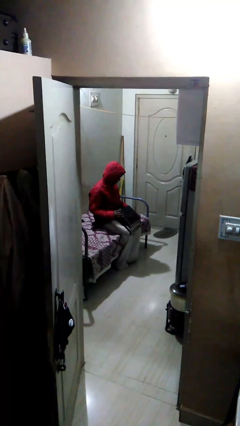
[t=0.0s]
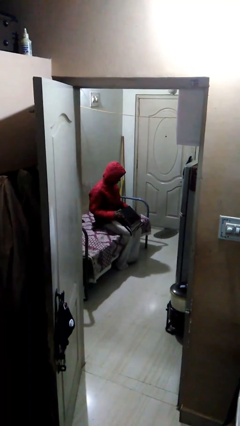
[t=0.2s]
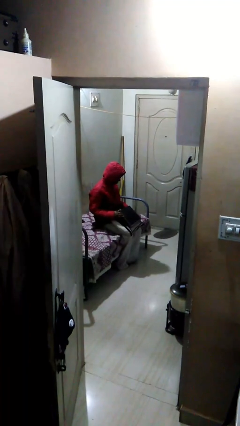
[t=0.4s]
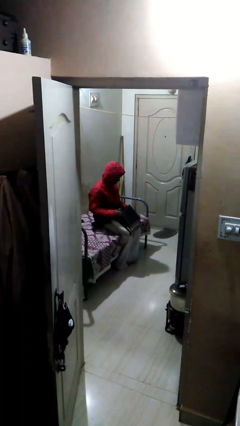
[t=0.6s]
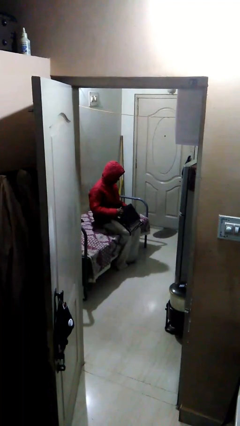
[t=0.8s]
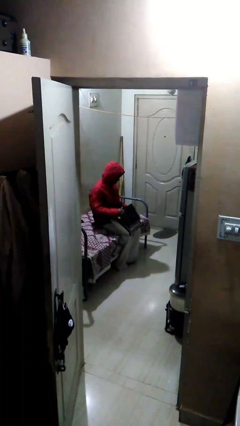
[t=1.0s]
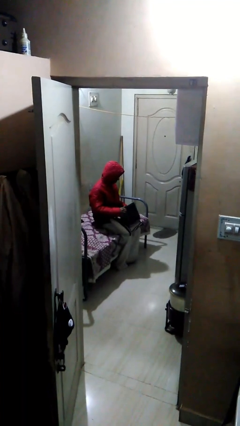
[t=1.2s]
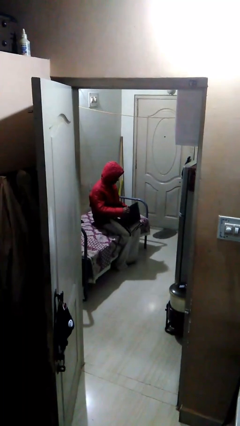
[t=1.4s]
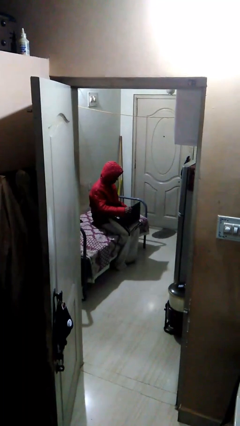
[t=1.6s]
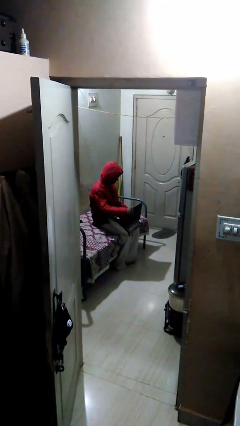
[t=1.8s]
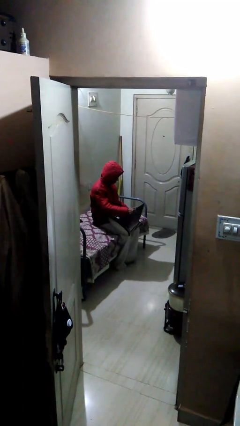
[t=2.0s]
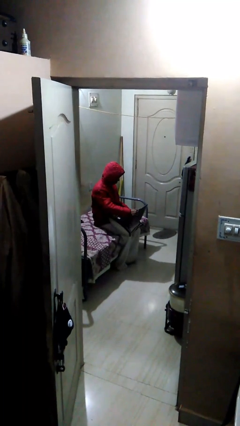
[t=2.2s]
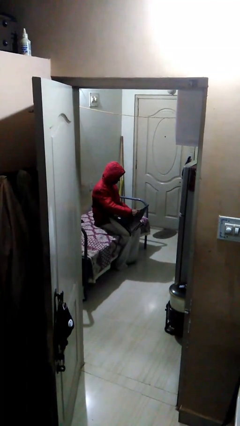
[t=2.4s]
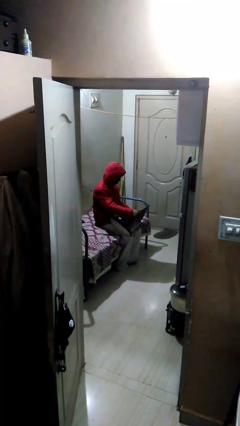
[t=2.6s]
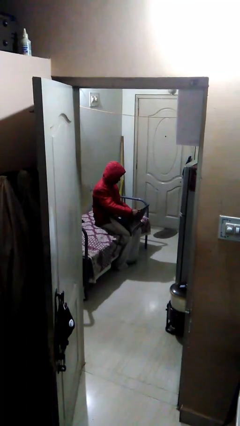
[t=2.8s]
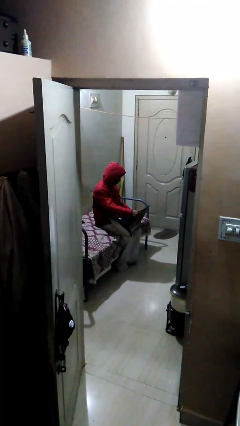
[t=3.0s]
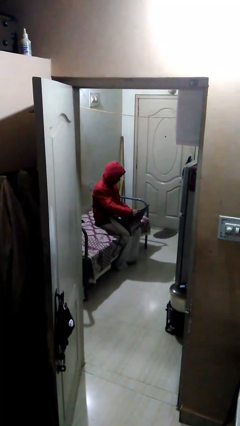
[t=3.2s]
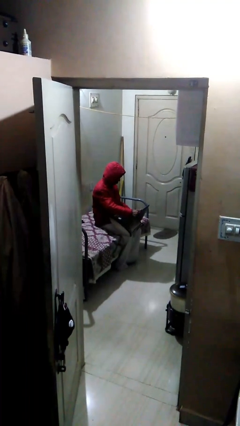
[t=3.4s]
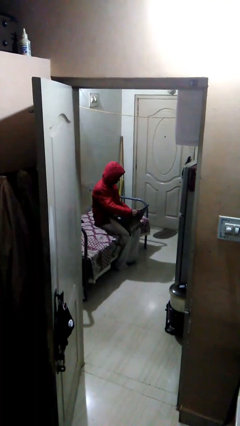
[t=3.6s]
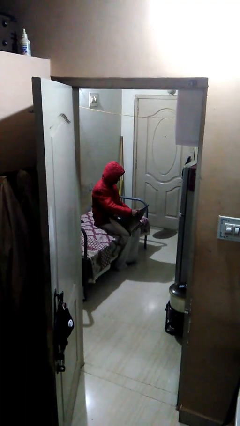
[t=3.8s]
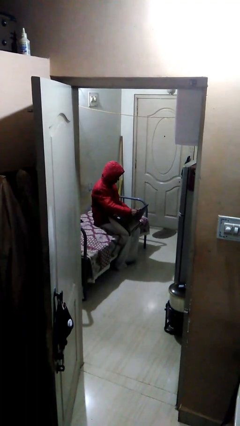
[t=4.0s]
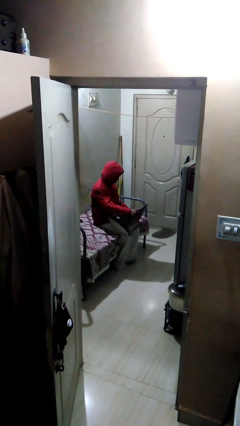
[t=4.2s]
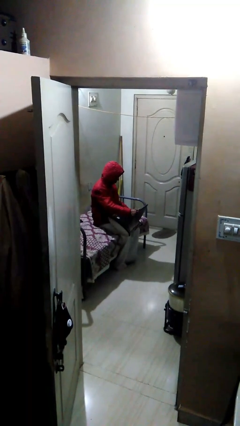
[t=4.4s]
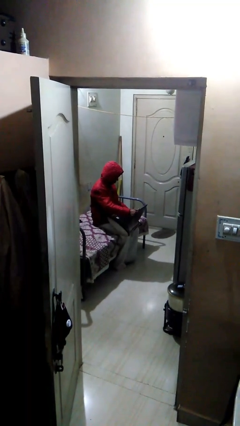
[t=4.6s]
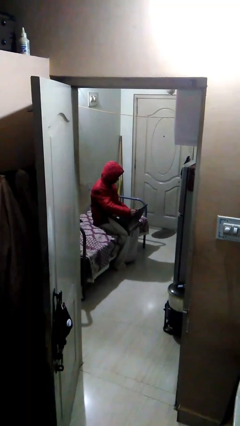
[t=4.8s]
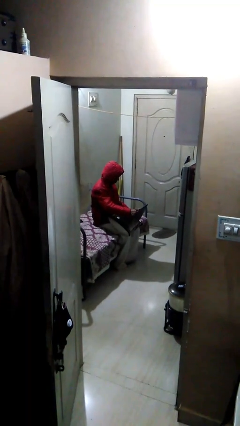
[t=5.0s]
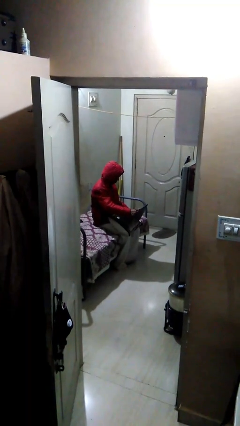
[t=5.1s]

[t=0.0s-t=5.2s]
person interacts with laptop

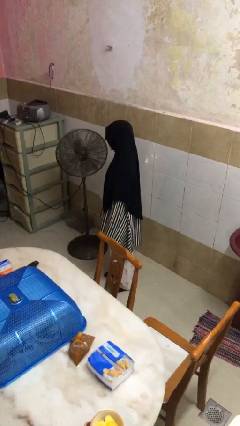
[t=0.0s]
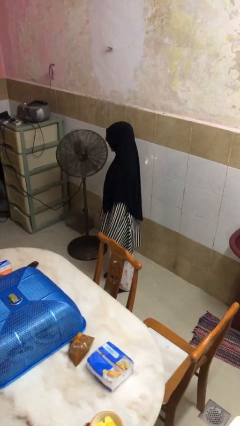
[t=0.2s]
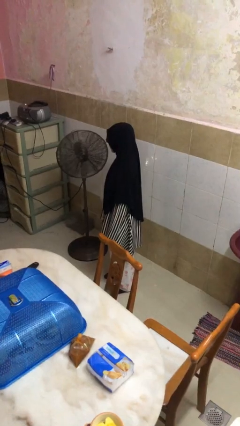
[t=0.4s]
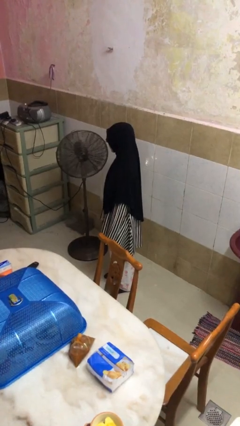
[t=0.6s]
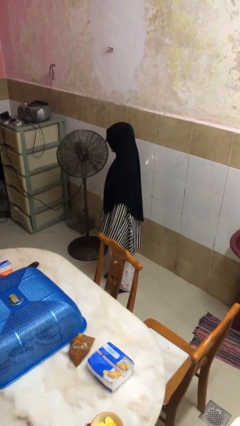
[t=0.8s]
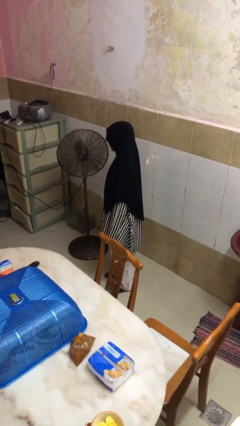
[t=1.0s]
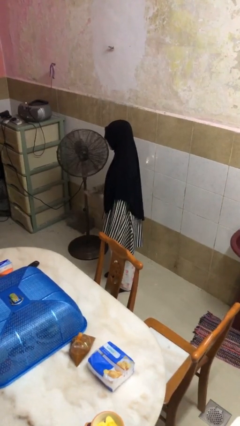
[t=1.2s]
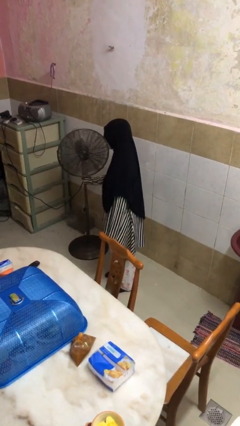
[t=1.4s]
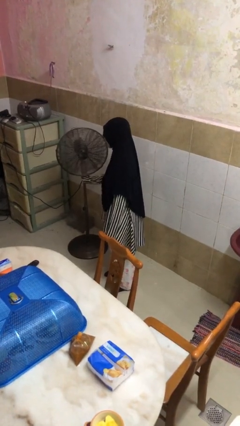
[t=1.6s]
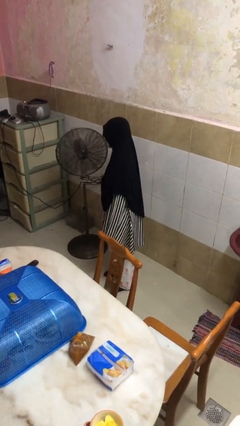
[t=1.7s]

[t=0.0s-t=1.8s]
person turns off fan

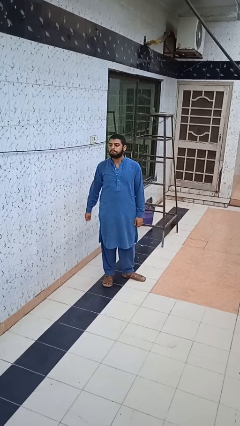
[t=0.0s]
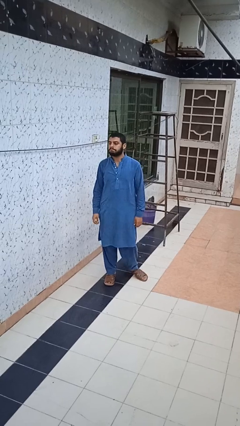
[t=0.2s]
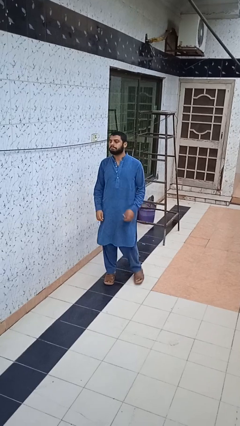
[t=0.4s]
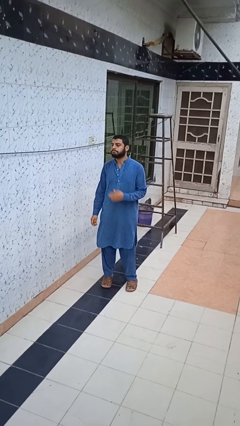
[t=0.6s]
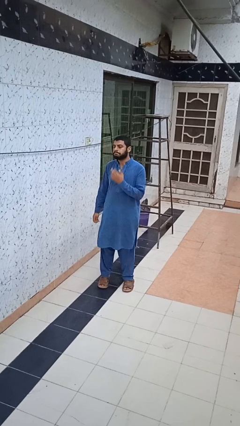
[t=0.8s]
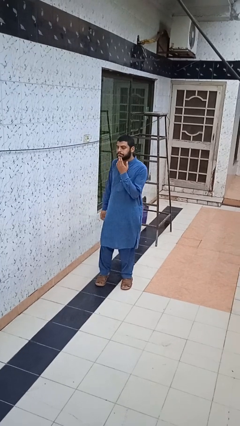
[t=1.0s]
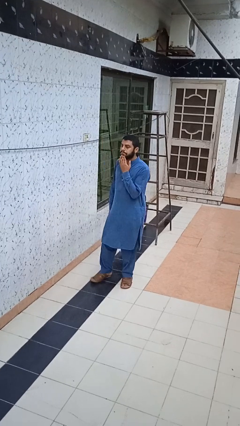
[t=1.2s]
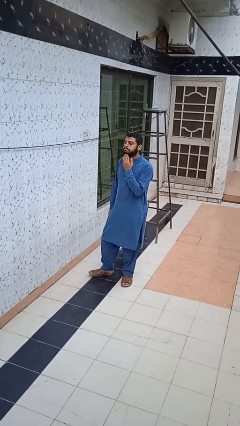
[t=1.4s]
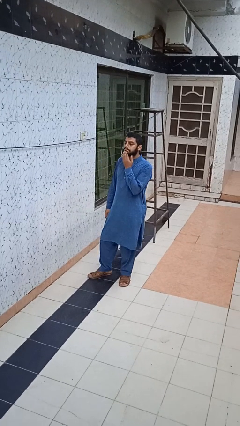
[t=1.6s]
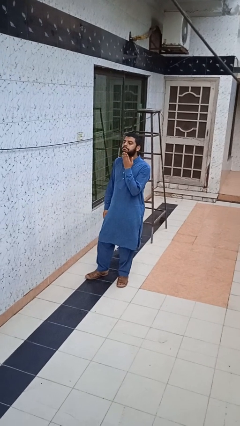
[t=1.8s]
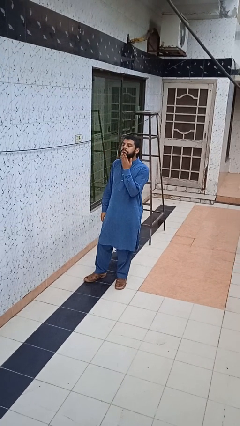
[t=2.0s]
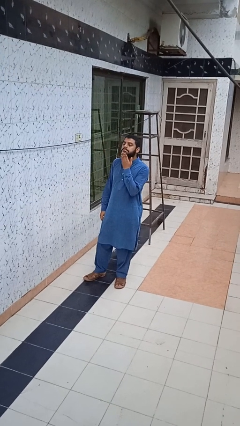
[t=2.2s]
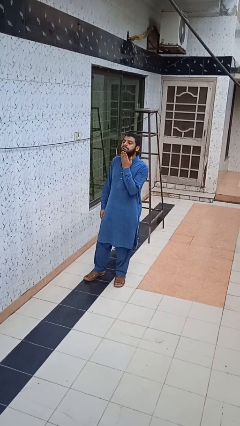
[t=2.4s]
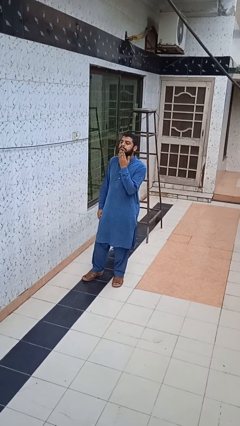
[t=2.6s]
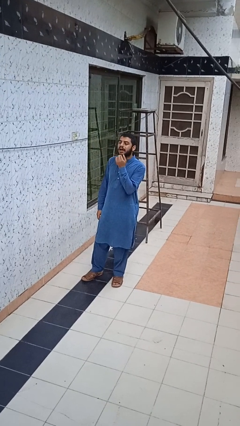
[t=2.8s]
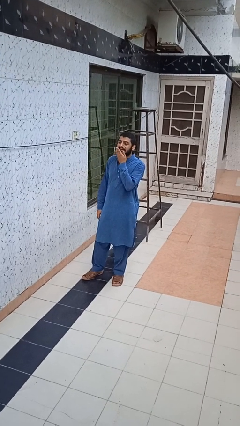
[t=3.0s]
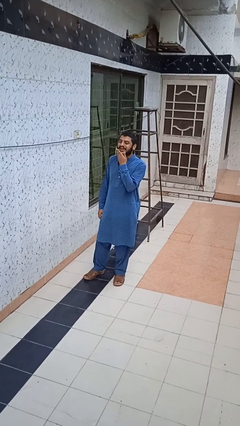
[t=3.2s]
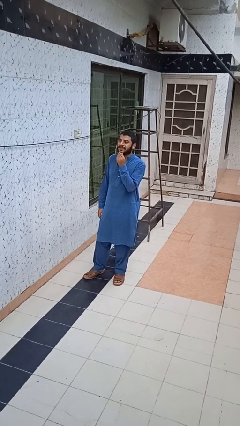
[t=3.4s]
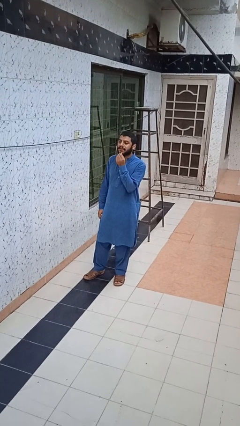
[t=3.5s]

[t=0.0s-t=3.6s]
person strokes chin

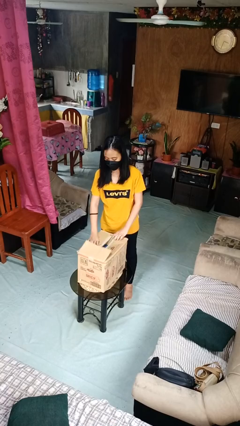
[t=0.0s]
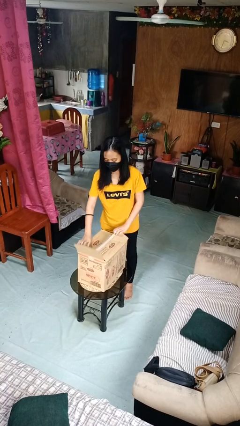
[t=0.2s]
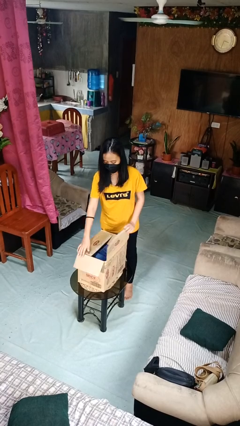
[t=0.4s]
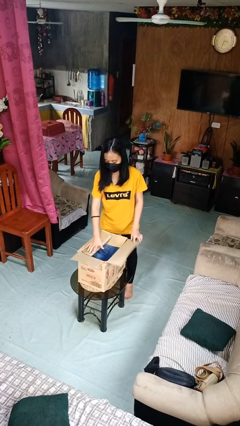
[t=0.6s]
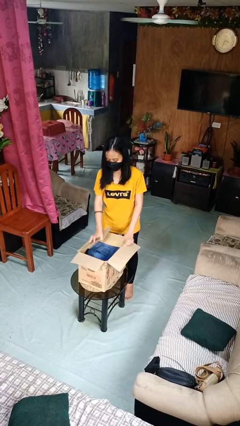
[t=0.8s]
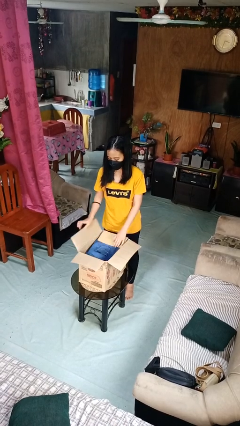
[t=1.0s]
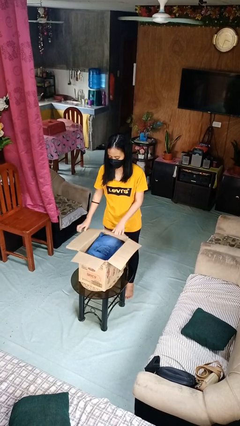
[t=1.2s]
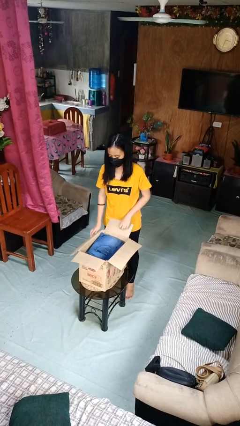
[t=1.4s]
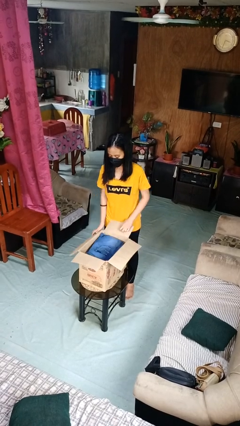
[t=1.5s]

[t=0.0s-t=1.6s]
person opens box

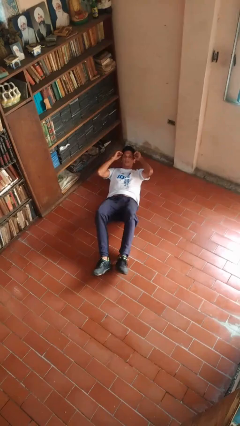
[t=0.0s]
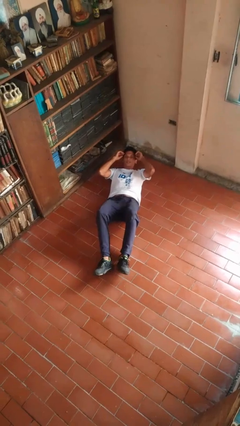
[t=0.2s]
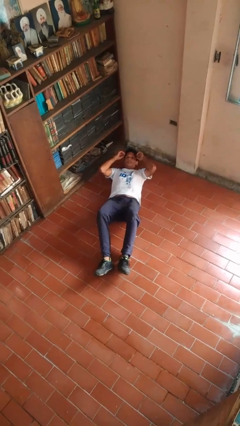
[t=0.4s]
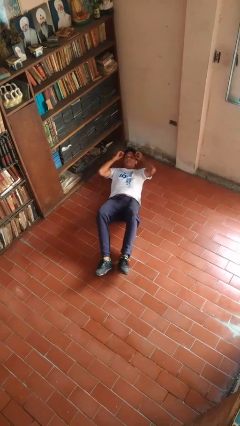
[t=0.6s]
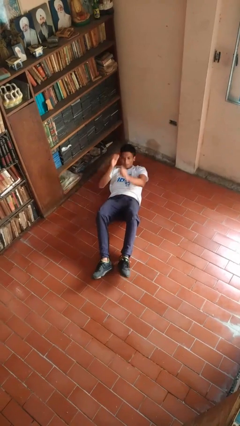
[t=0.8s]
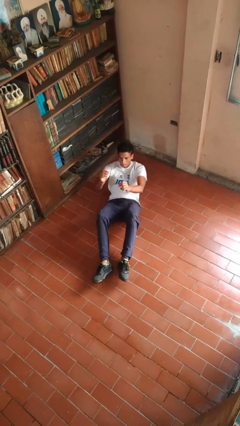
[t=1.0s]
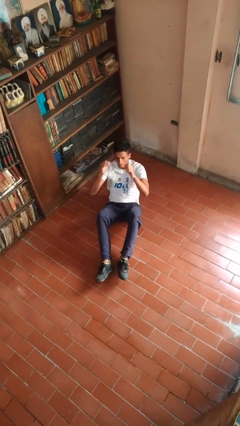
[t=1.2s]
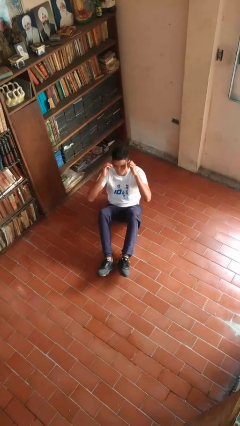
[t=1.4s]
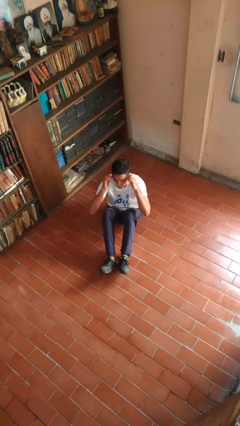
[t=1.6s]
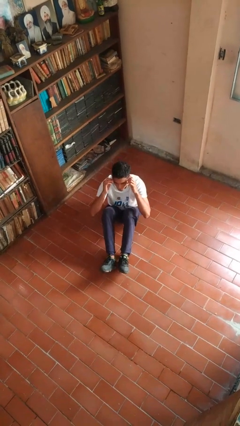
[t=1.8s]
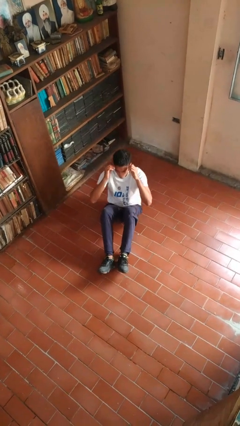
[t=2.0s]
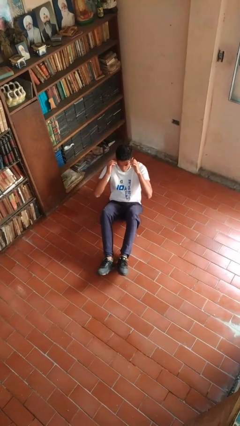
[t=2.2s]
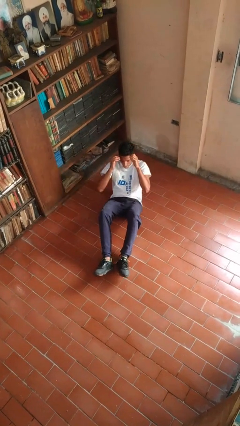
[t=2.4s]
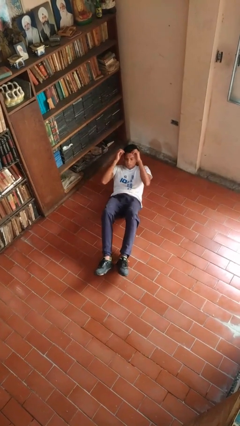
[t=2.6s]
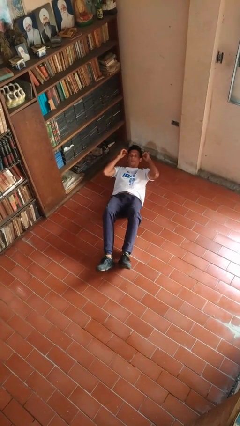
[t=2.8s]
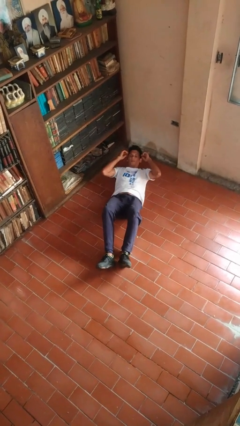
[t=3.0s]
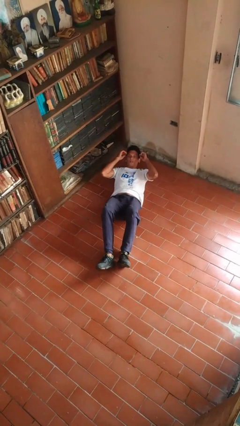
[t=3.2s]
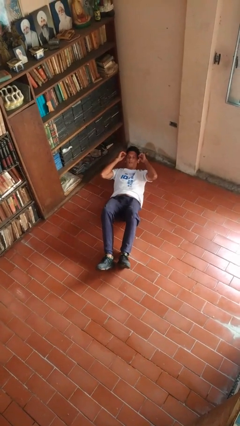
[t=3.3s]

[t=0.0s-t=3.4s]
person exercises with situp

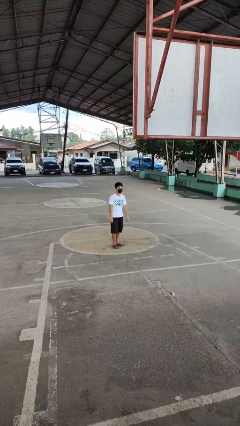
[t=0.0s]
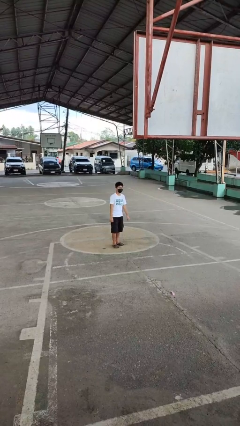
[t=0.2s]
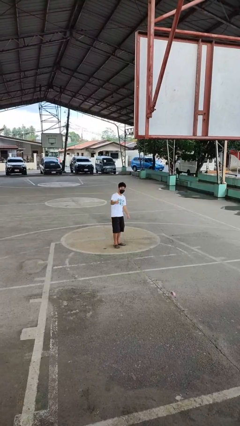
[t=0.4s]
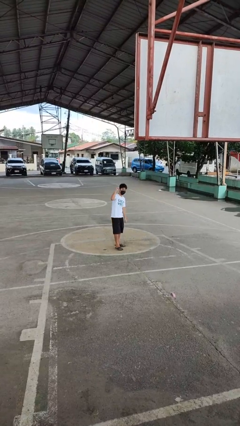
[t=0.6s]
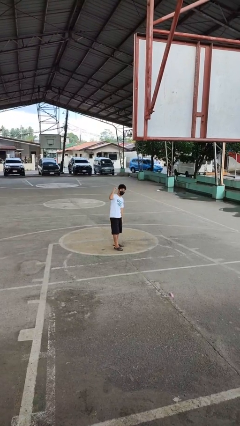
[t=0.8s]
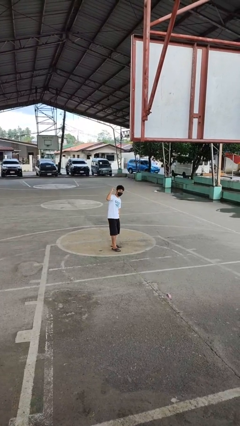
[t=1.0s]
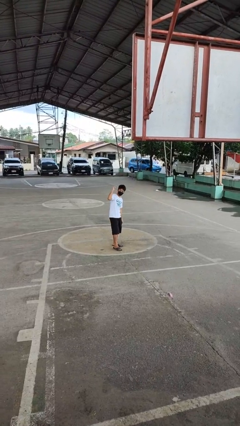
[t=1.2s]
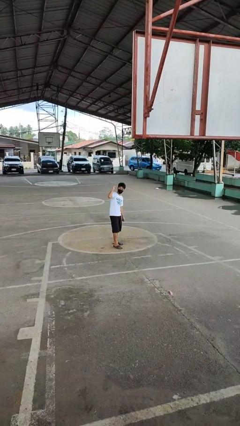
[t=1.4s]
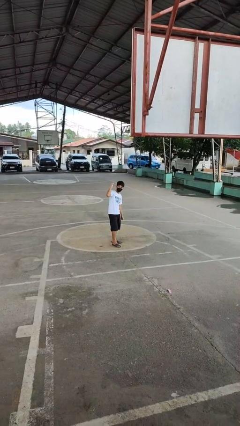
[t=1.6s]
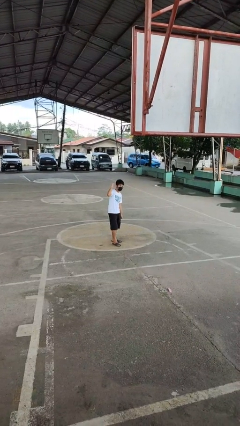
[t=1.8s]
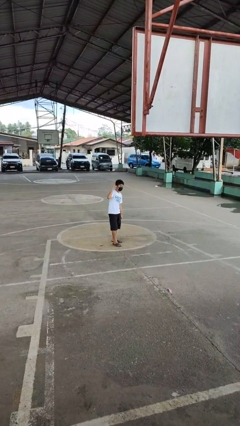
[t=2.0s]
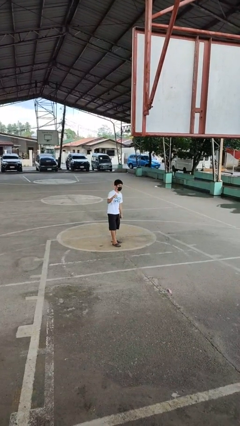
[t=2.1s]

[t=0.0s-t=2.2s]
person gestures behind me
